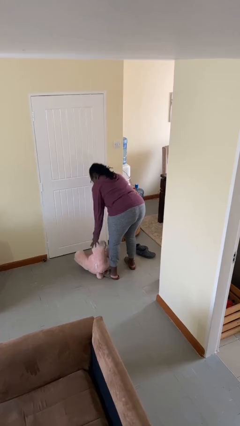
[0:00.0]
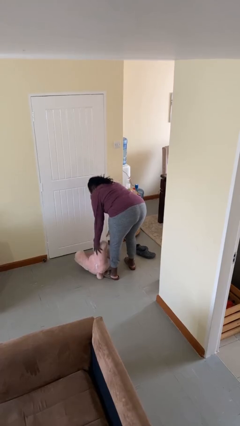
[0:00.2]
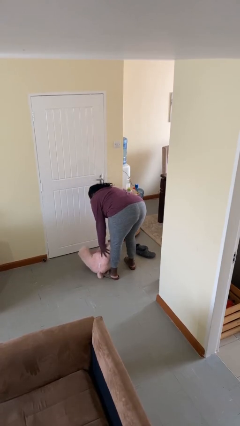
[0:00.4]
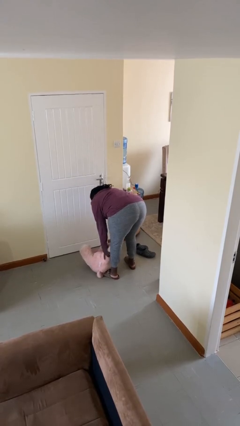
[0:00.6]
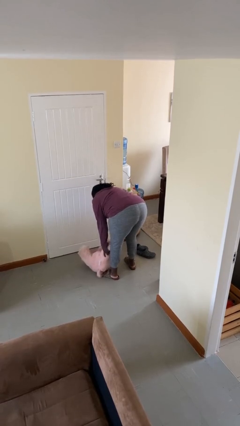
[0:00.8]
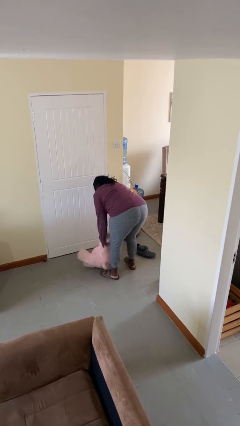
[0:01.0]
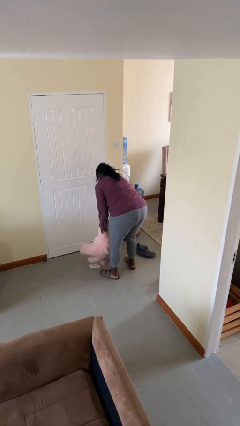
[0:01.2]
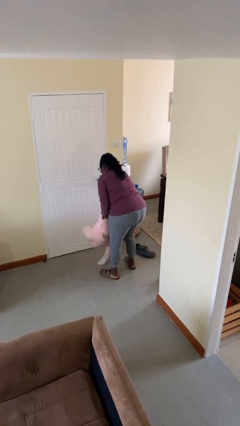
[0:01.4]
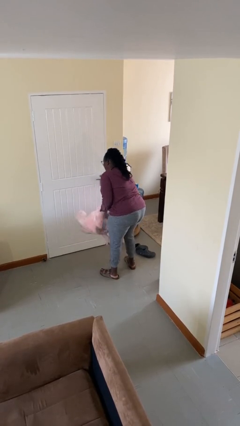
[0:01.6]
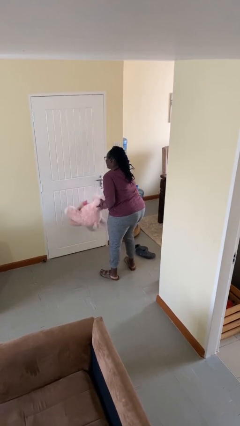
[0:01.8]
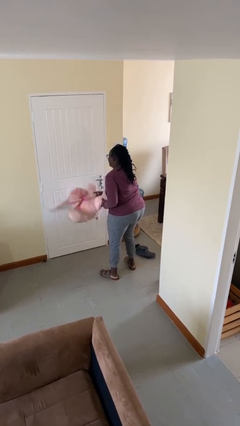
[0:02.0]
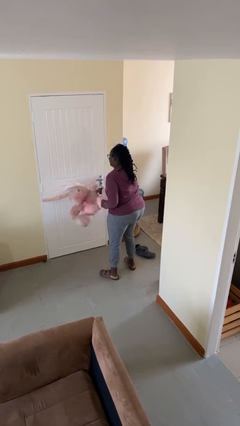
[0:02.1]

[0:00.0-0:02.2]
person picks up object from floor

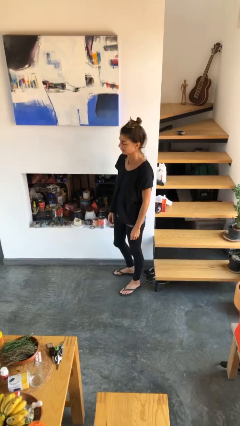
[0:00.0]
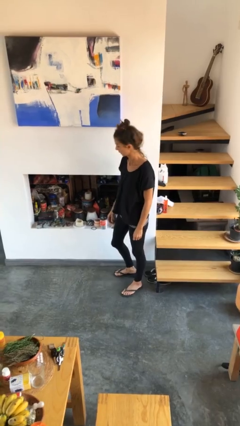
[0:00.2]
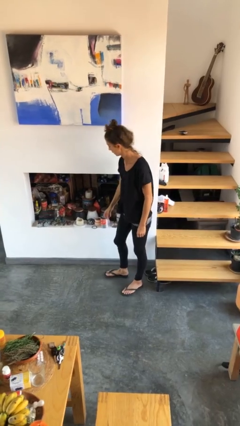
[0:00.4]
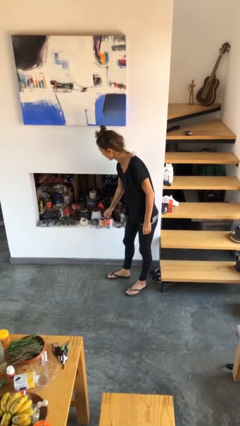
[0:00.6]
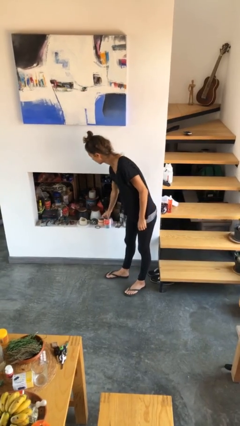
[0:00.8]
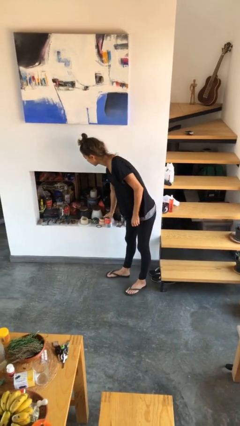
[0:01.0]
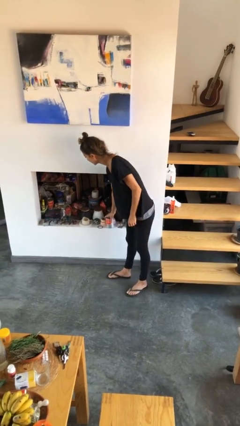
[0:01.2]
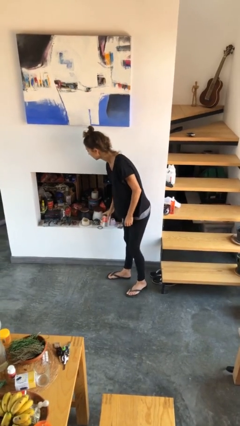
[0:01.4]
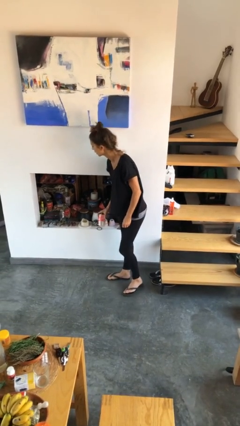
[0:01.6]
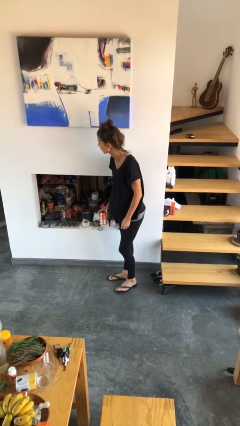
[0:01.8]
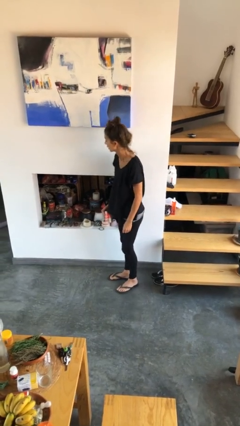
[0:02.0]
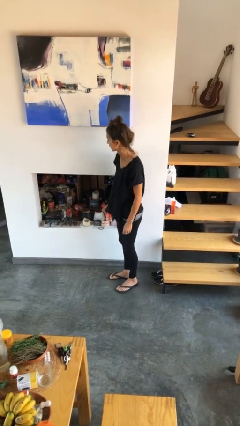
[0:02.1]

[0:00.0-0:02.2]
person picks up object from cabinet

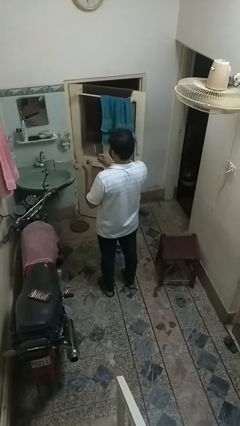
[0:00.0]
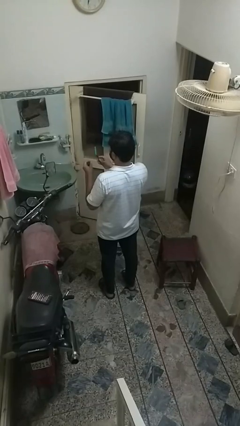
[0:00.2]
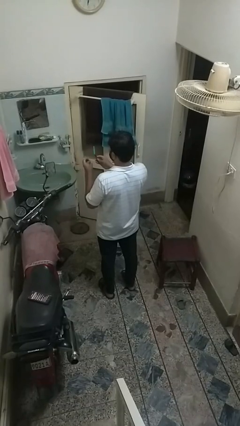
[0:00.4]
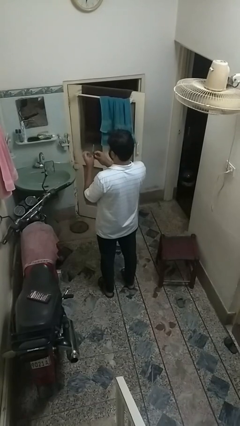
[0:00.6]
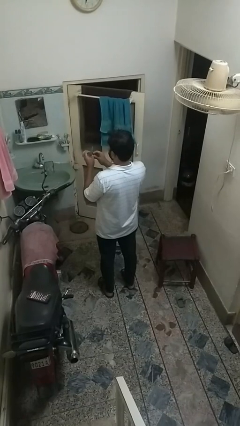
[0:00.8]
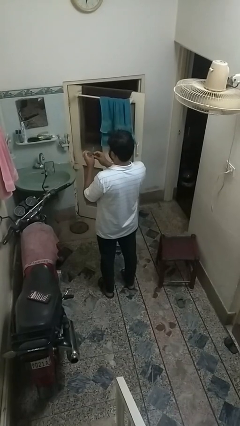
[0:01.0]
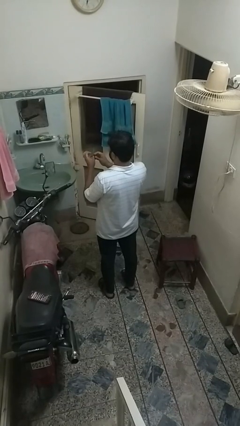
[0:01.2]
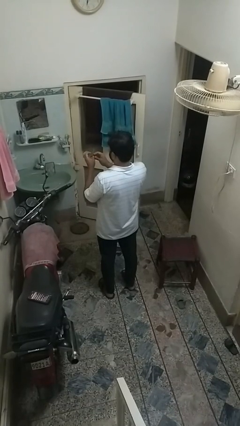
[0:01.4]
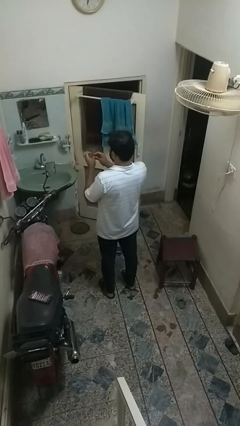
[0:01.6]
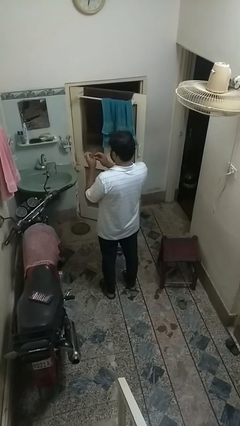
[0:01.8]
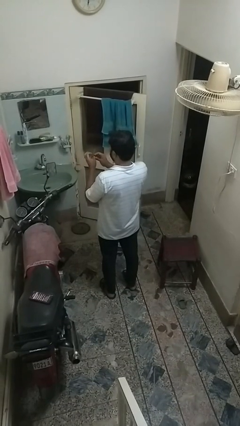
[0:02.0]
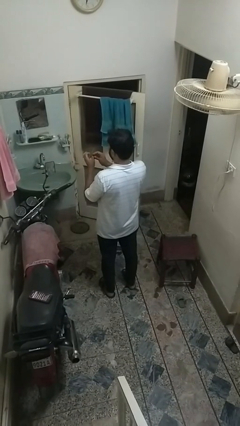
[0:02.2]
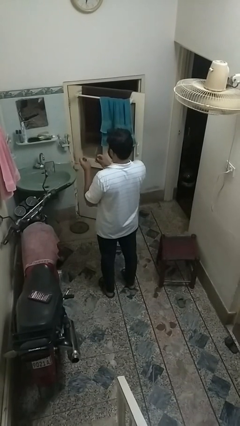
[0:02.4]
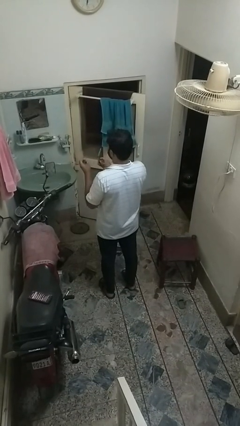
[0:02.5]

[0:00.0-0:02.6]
person files fingernails

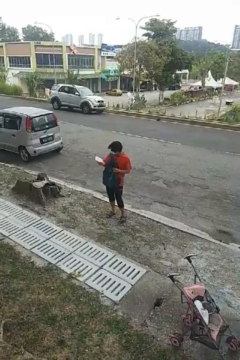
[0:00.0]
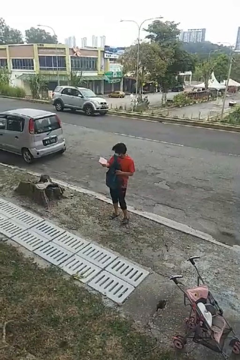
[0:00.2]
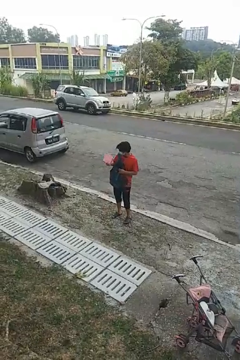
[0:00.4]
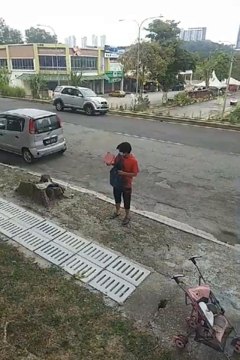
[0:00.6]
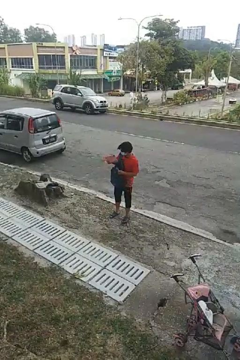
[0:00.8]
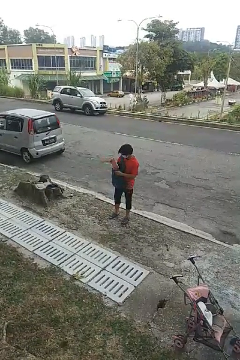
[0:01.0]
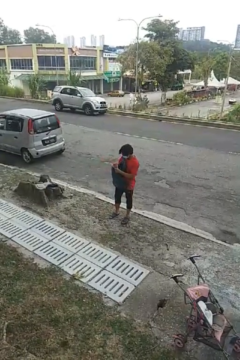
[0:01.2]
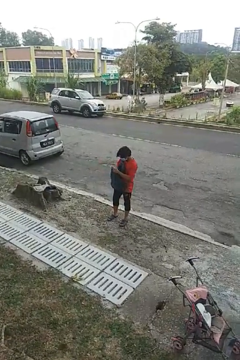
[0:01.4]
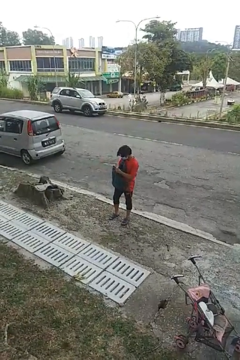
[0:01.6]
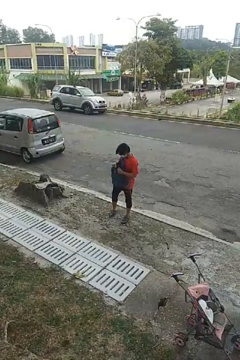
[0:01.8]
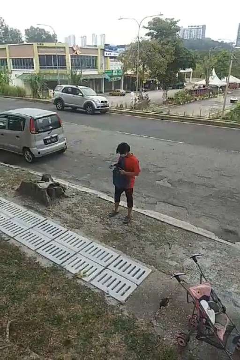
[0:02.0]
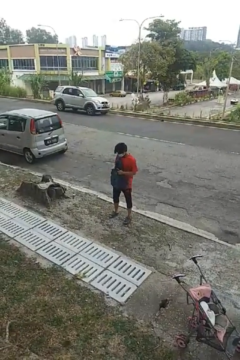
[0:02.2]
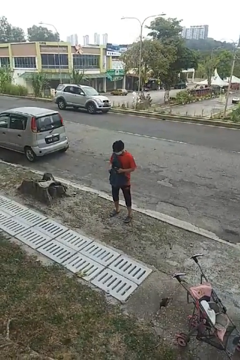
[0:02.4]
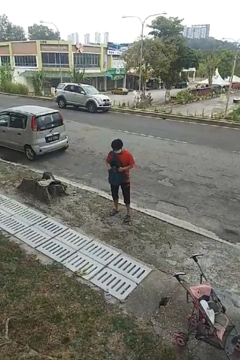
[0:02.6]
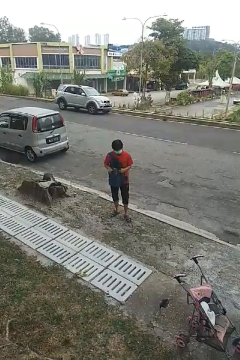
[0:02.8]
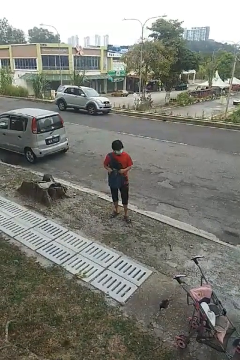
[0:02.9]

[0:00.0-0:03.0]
person puts object into backpack

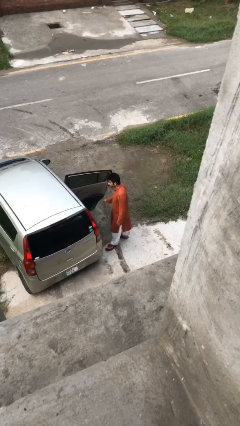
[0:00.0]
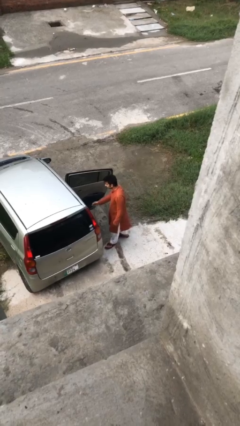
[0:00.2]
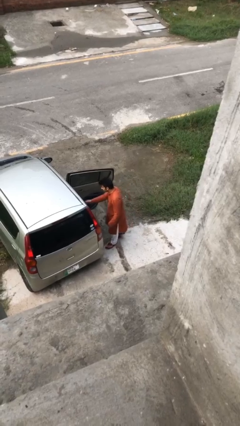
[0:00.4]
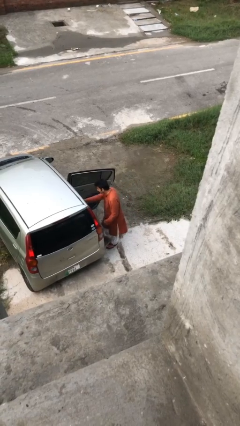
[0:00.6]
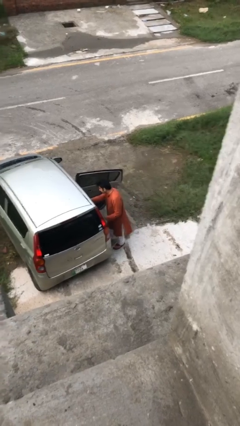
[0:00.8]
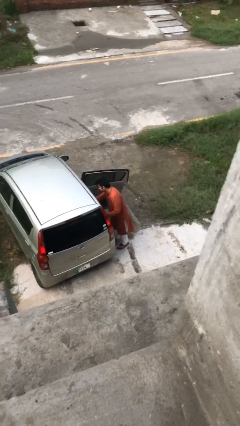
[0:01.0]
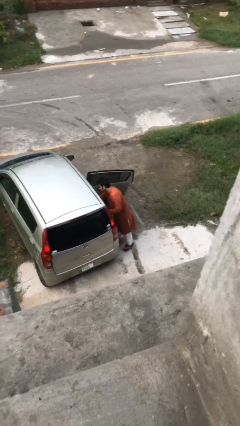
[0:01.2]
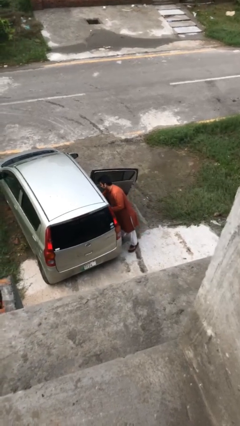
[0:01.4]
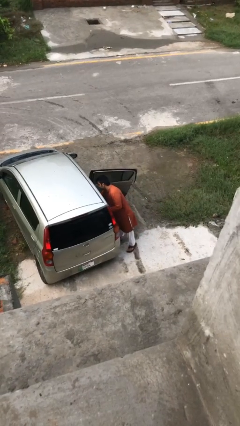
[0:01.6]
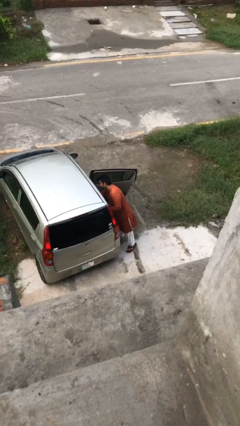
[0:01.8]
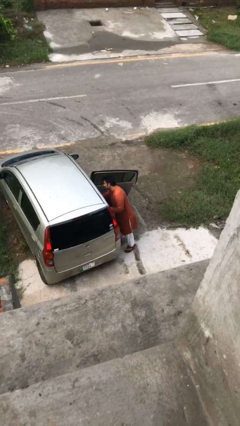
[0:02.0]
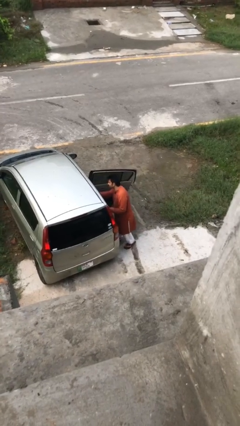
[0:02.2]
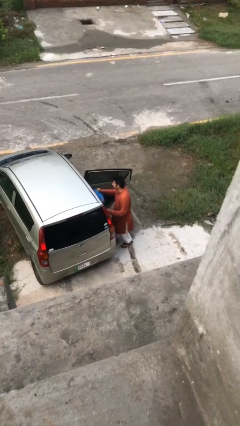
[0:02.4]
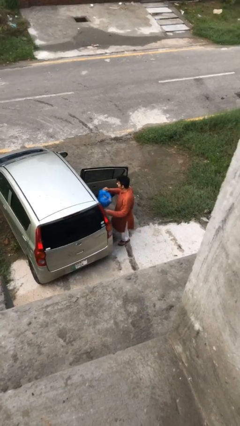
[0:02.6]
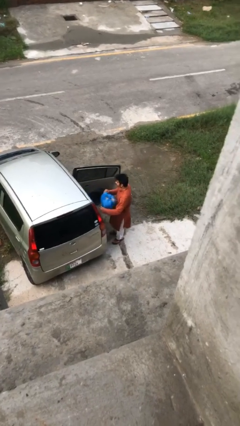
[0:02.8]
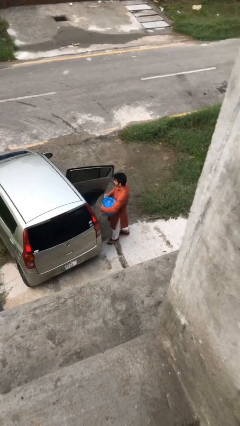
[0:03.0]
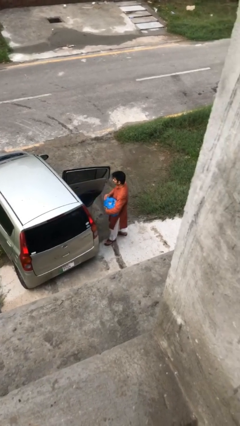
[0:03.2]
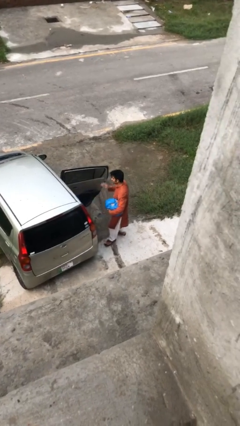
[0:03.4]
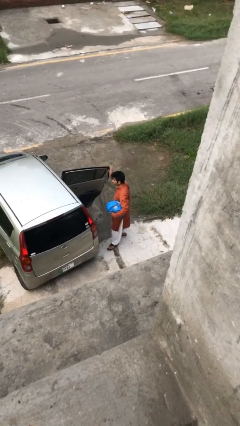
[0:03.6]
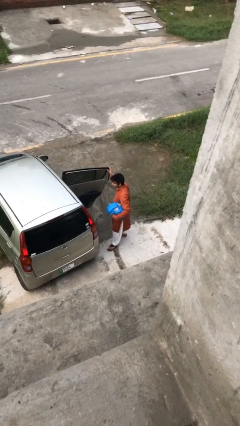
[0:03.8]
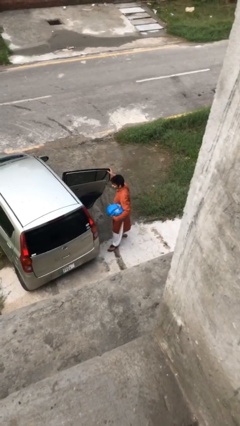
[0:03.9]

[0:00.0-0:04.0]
person unloads car

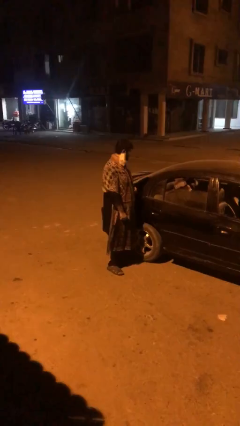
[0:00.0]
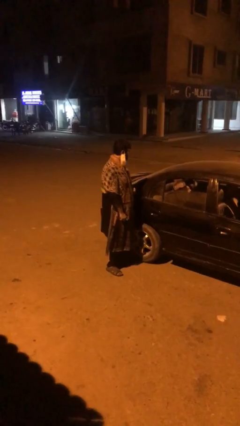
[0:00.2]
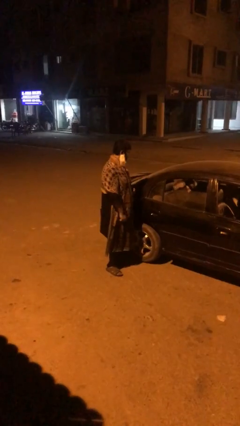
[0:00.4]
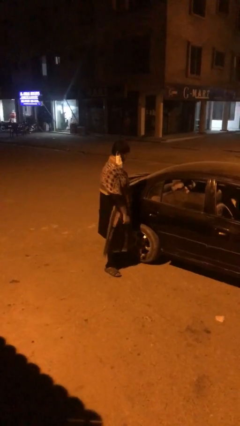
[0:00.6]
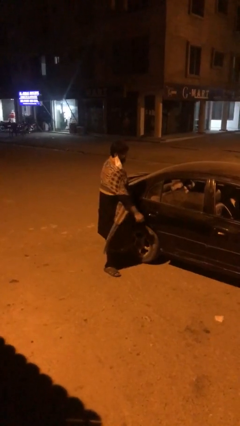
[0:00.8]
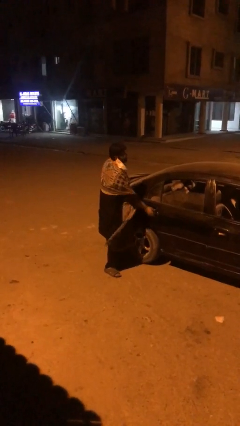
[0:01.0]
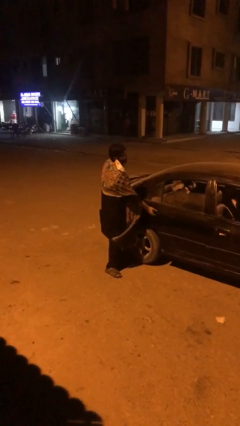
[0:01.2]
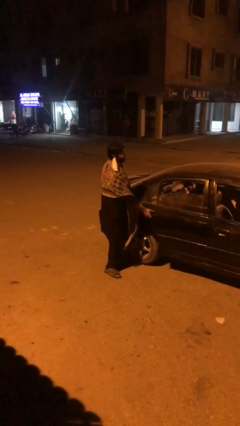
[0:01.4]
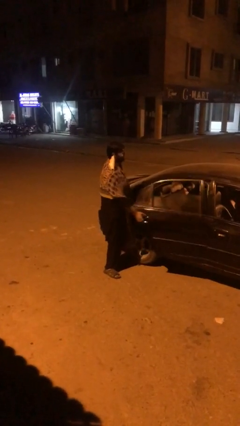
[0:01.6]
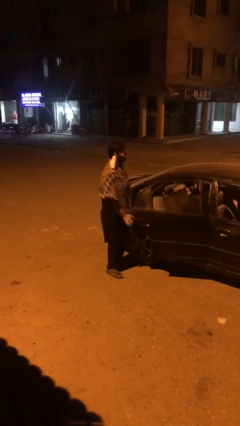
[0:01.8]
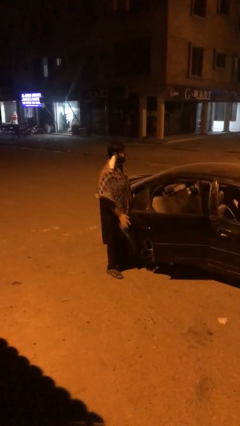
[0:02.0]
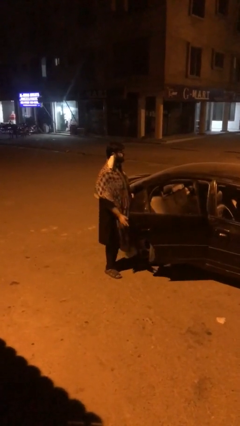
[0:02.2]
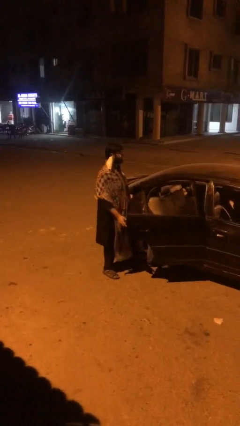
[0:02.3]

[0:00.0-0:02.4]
person opens car door

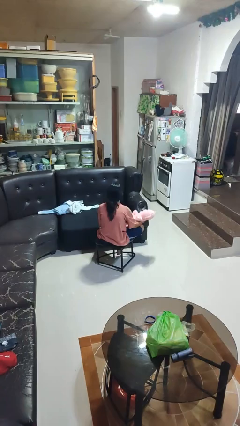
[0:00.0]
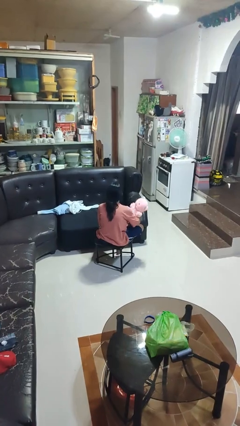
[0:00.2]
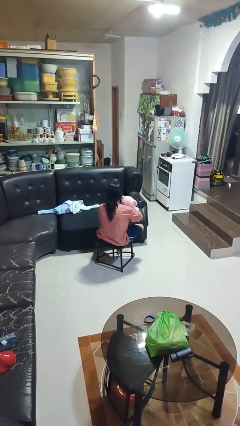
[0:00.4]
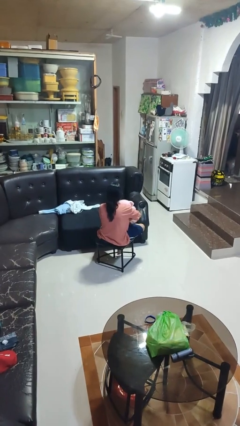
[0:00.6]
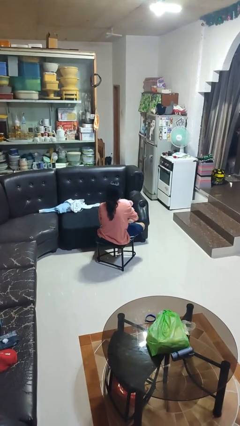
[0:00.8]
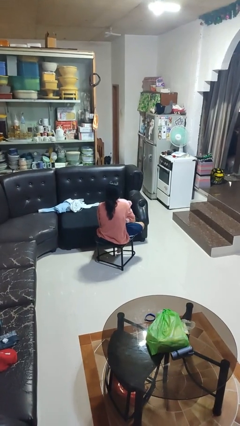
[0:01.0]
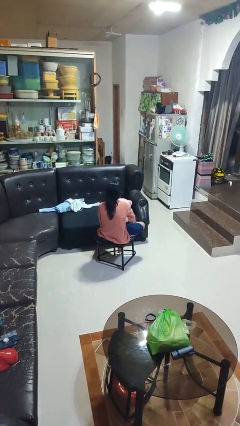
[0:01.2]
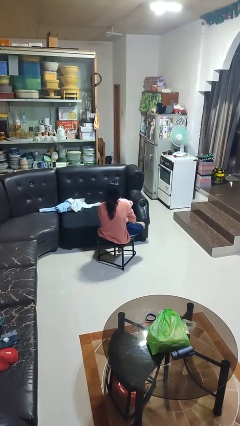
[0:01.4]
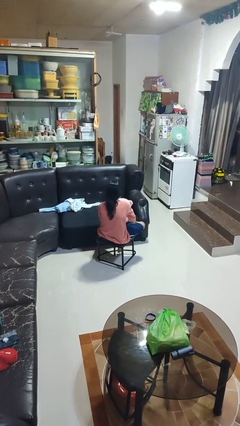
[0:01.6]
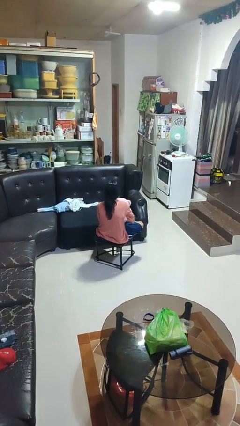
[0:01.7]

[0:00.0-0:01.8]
person hugs stuffed animal
